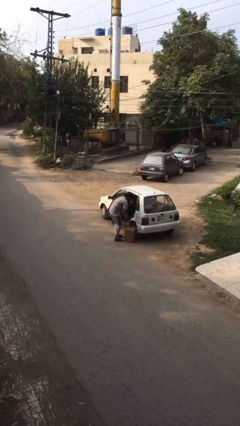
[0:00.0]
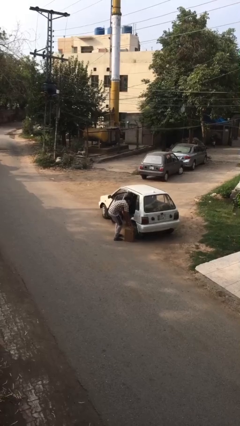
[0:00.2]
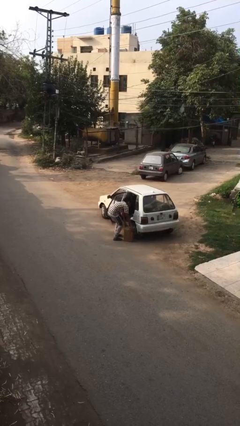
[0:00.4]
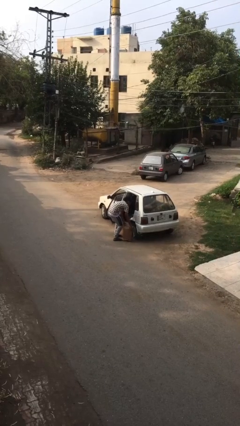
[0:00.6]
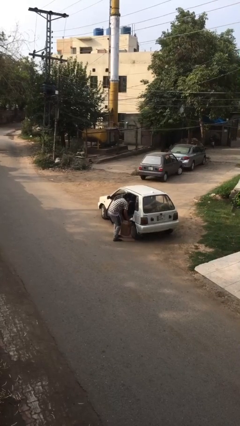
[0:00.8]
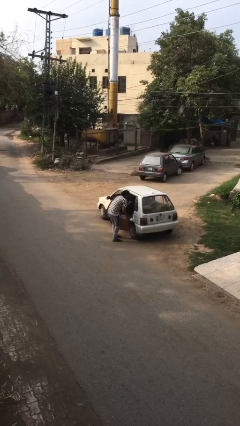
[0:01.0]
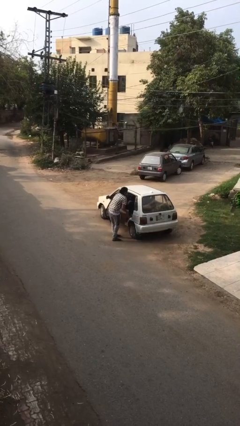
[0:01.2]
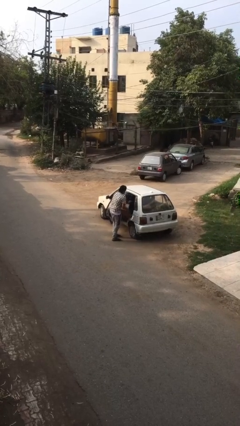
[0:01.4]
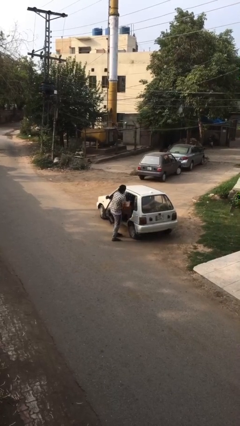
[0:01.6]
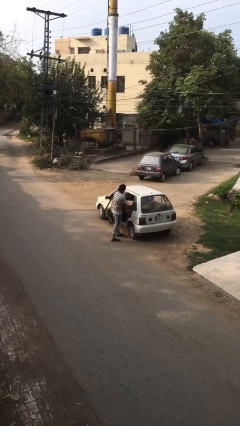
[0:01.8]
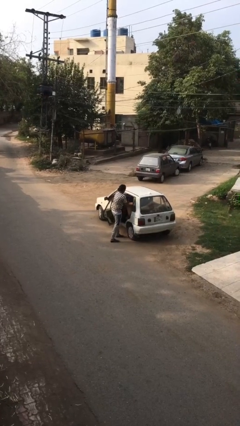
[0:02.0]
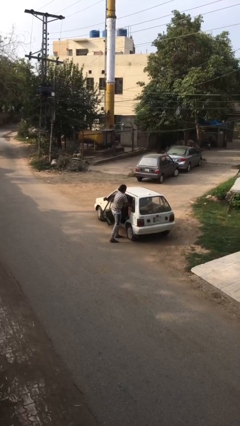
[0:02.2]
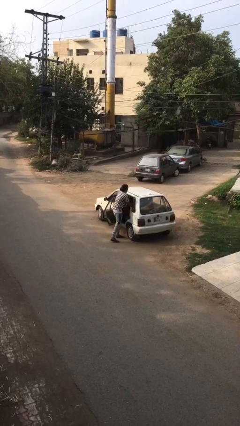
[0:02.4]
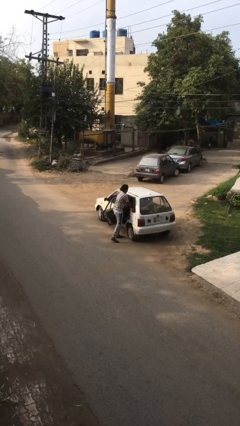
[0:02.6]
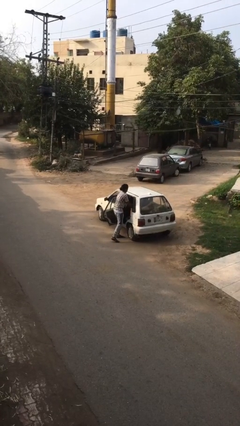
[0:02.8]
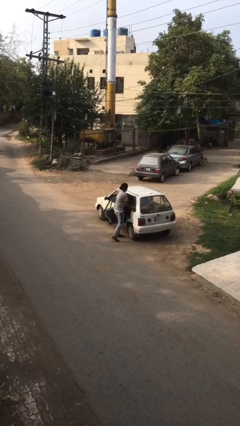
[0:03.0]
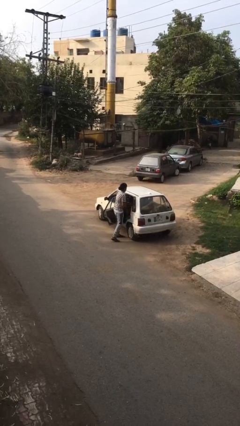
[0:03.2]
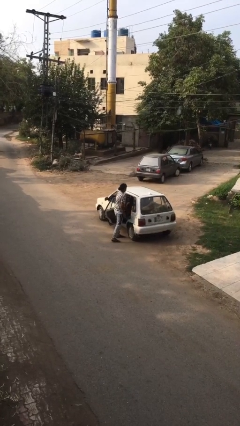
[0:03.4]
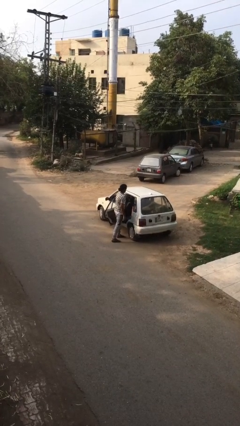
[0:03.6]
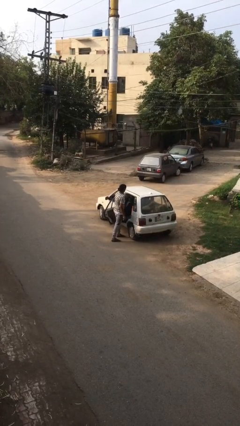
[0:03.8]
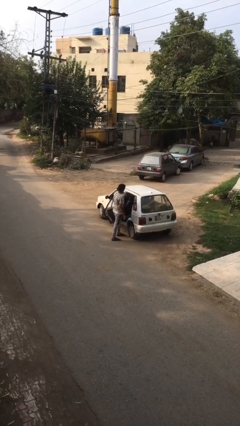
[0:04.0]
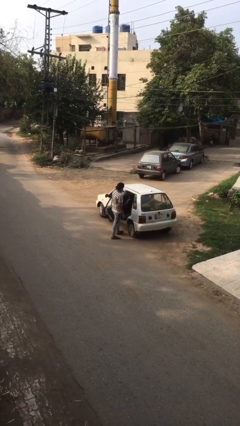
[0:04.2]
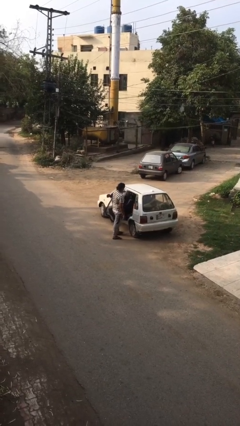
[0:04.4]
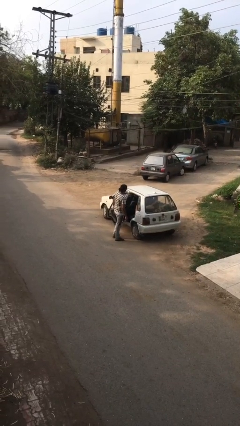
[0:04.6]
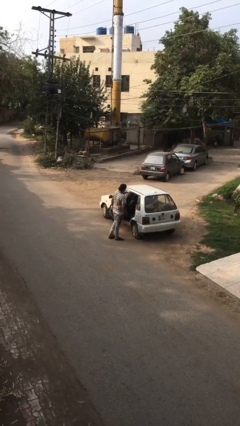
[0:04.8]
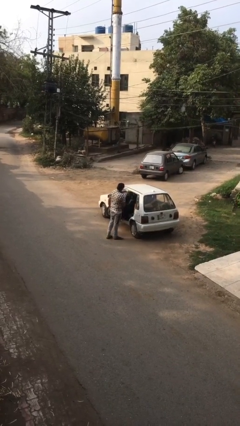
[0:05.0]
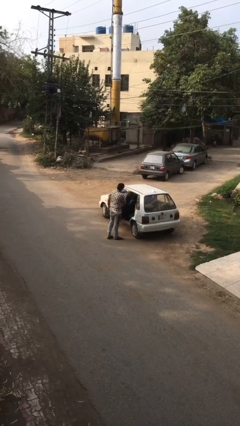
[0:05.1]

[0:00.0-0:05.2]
person loads car

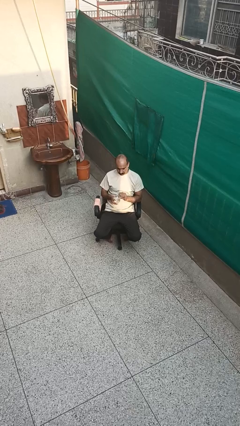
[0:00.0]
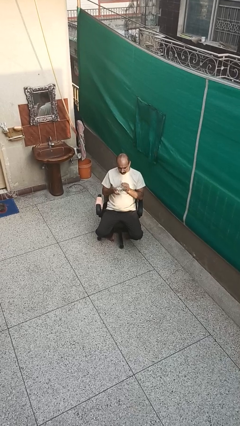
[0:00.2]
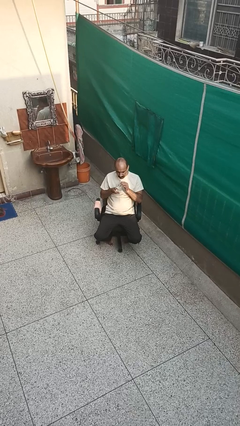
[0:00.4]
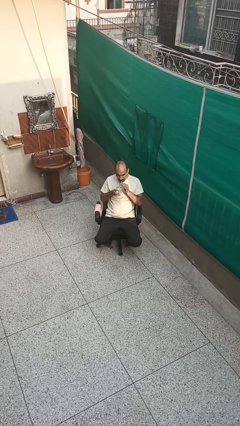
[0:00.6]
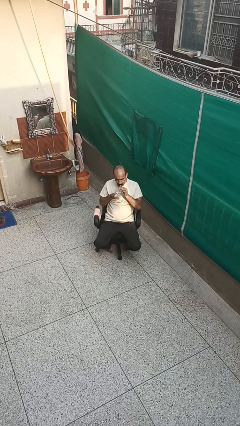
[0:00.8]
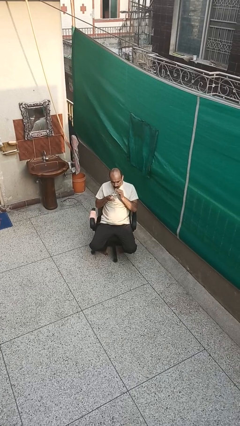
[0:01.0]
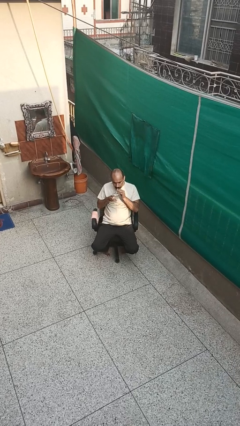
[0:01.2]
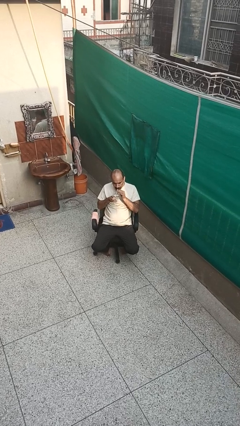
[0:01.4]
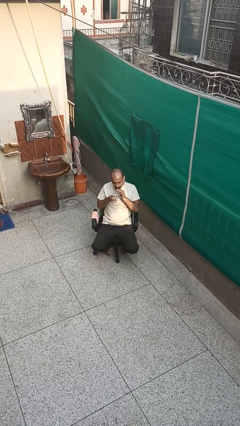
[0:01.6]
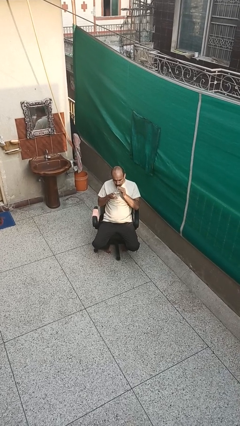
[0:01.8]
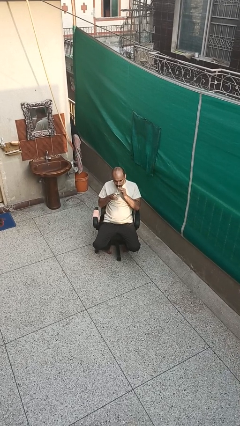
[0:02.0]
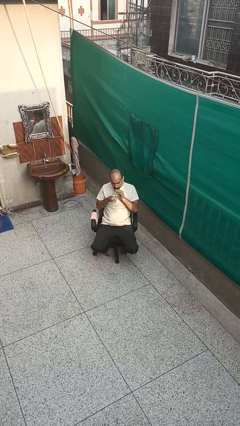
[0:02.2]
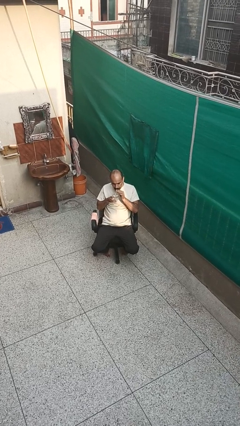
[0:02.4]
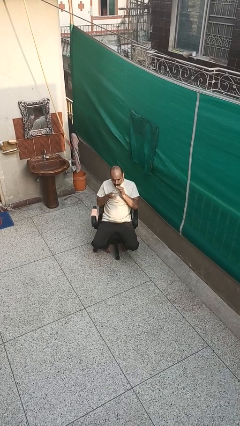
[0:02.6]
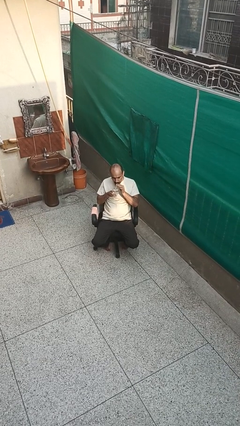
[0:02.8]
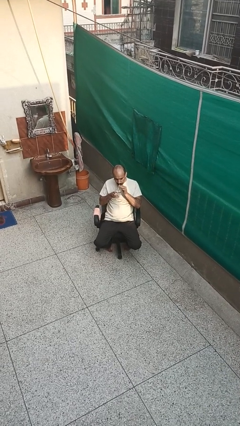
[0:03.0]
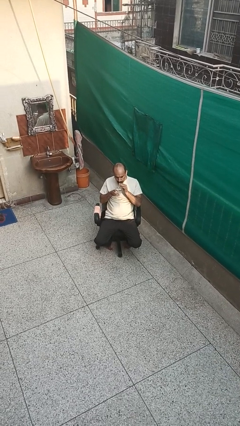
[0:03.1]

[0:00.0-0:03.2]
person drinks from straw

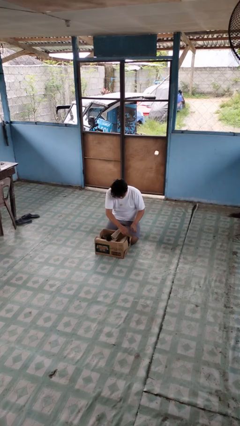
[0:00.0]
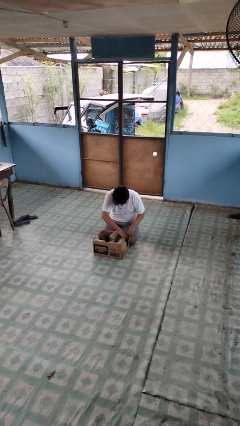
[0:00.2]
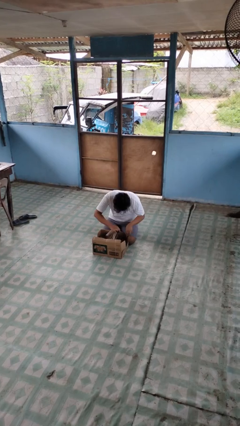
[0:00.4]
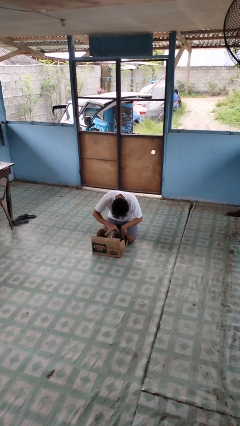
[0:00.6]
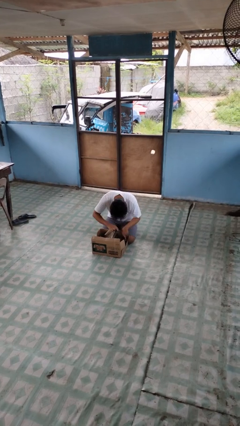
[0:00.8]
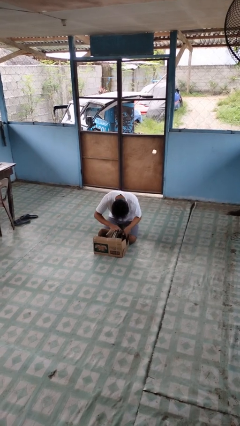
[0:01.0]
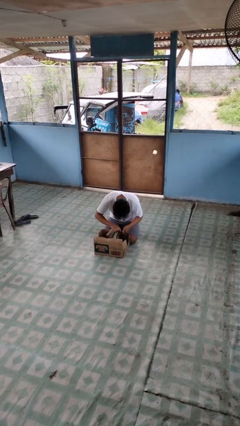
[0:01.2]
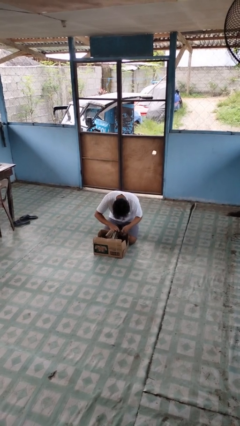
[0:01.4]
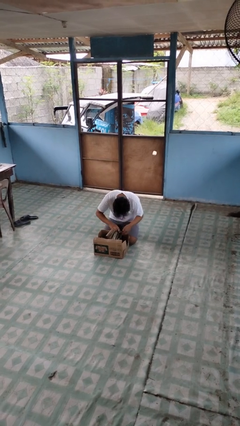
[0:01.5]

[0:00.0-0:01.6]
person searches in box

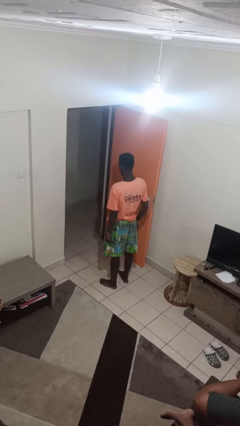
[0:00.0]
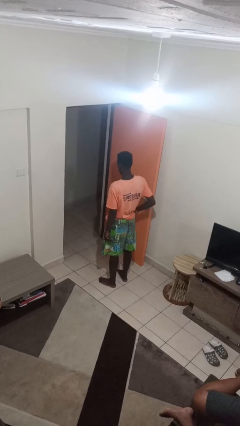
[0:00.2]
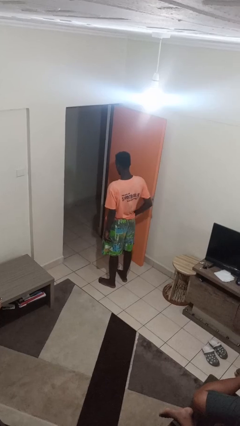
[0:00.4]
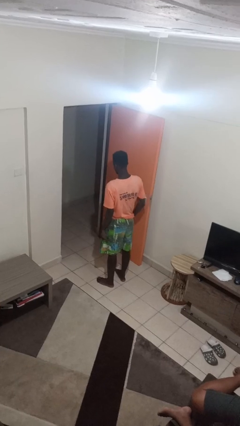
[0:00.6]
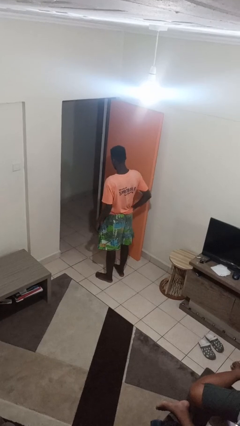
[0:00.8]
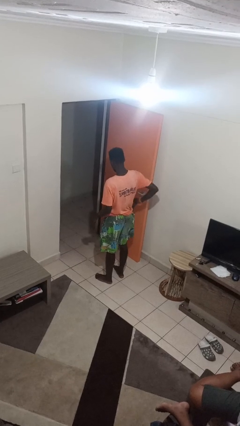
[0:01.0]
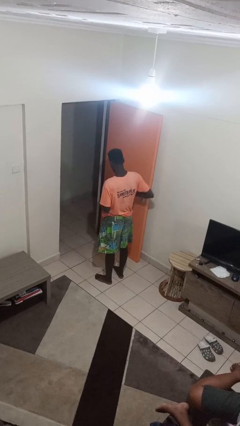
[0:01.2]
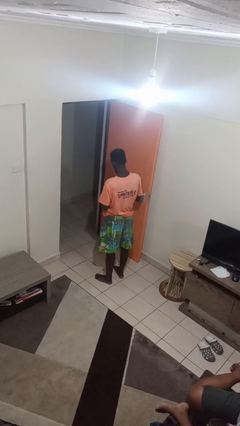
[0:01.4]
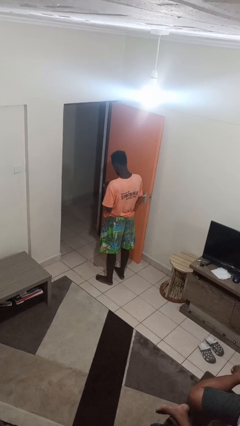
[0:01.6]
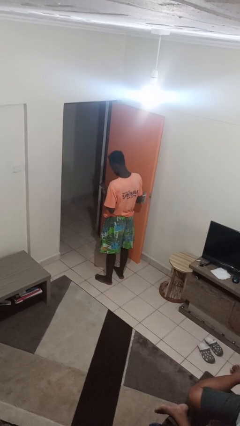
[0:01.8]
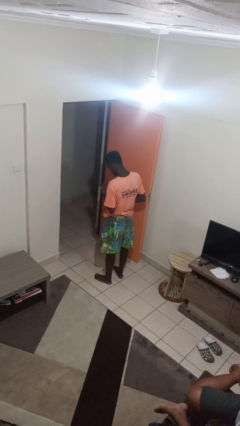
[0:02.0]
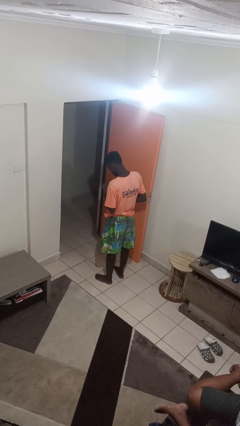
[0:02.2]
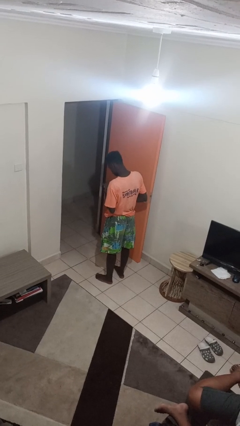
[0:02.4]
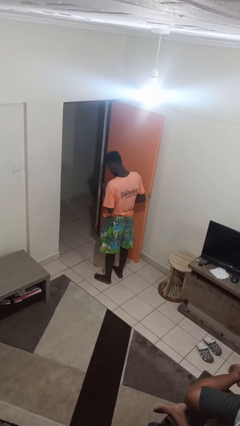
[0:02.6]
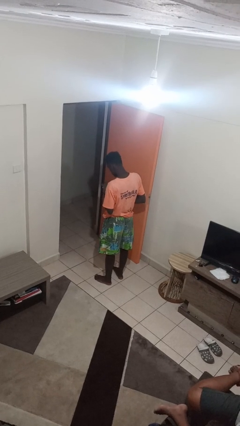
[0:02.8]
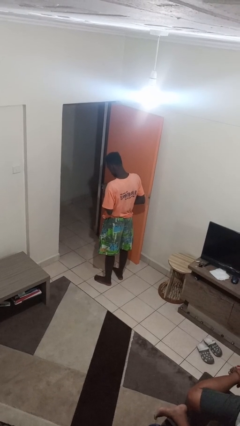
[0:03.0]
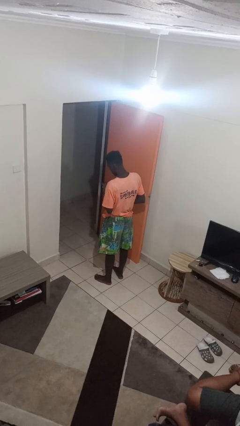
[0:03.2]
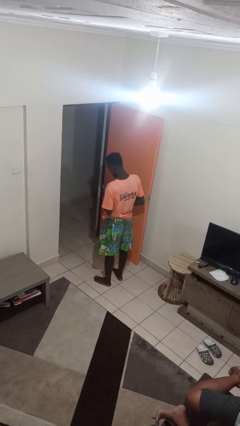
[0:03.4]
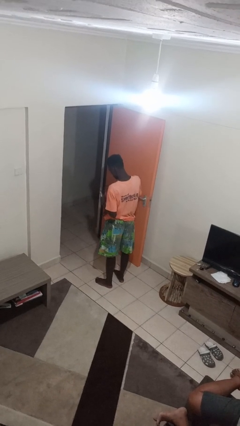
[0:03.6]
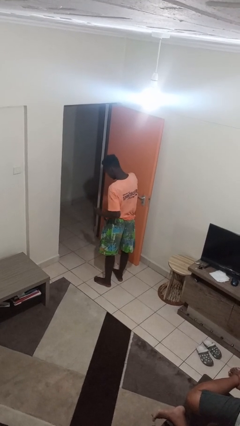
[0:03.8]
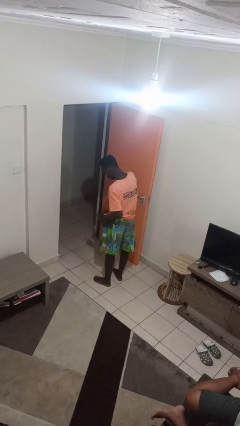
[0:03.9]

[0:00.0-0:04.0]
person takes phone from pocket

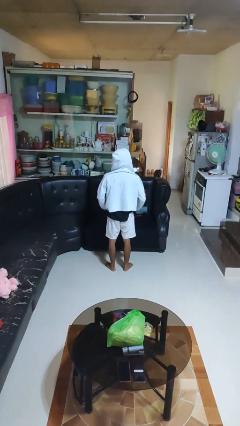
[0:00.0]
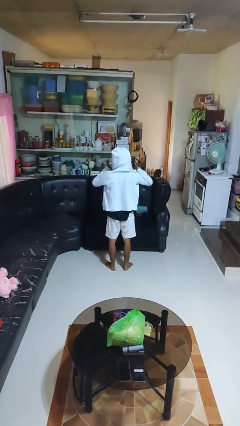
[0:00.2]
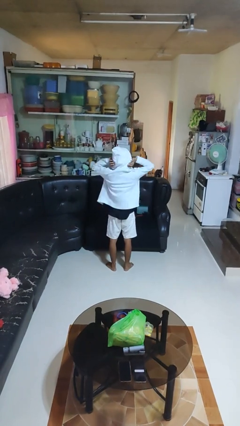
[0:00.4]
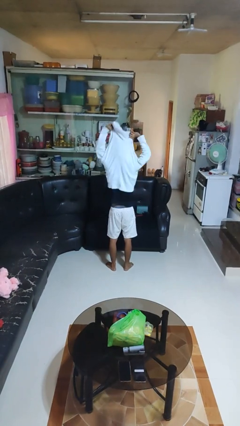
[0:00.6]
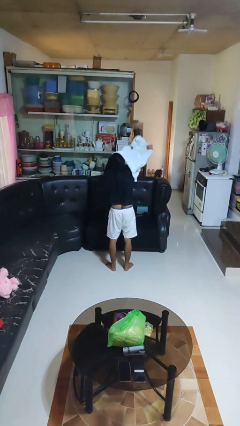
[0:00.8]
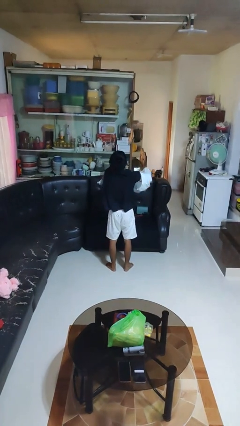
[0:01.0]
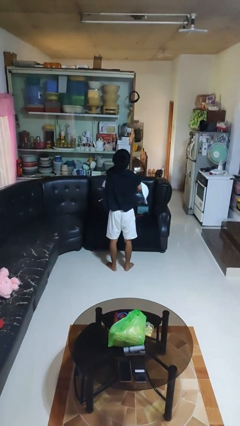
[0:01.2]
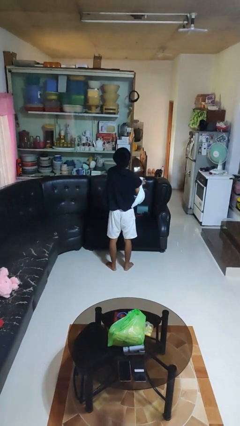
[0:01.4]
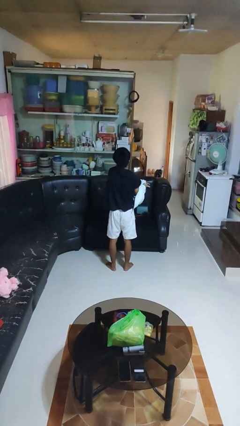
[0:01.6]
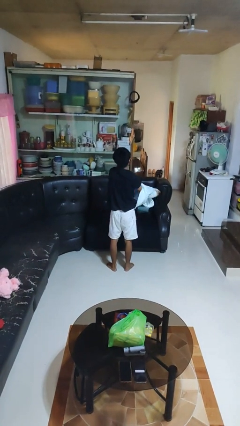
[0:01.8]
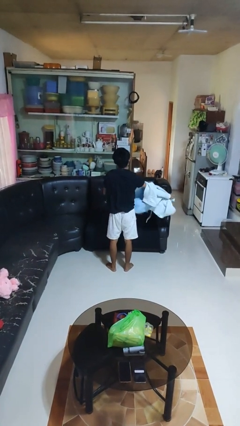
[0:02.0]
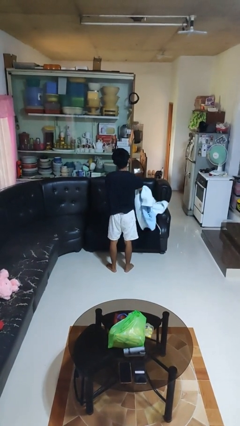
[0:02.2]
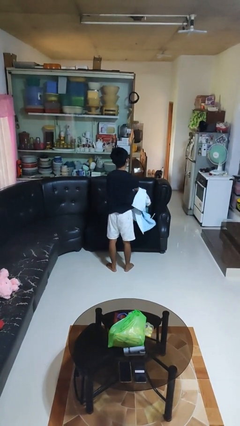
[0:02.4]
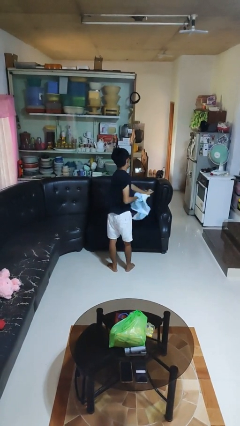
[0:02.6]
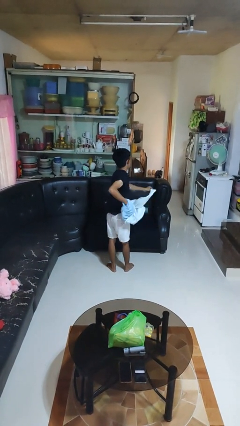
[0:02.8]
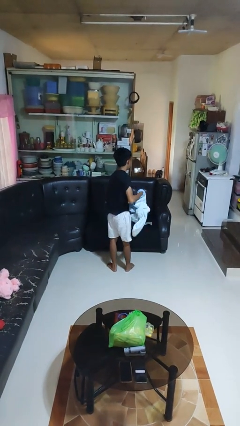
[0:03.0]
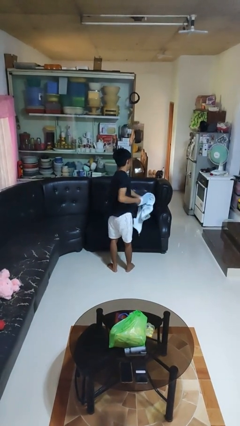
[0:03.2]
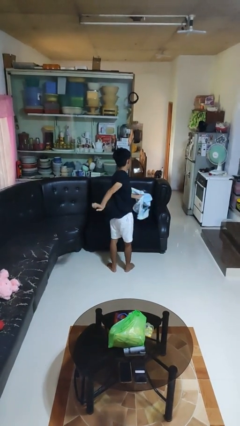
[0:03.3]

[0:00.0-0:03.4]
person takes off hoodie

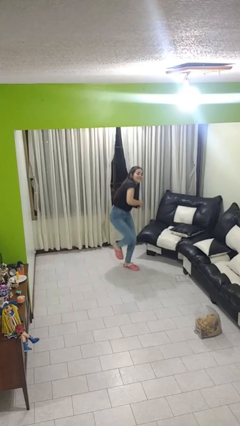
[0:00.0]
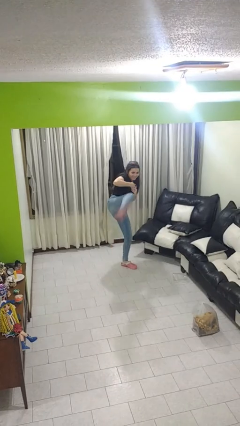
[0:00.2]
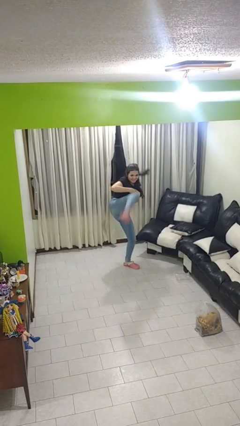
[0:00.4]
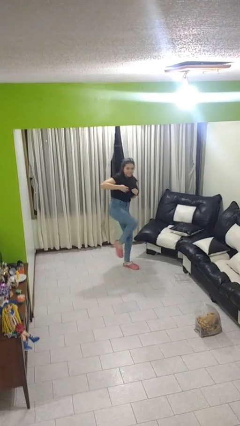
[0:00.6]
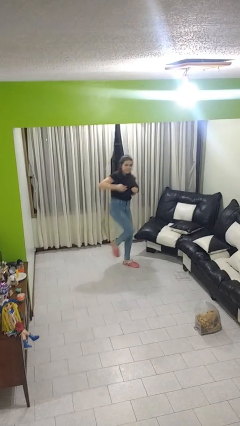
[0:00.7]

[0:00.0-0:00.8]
person karate kicks
